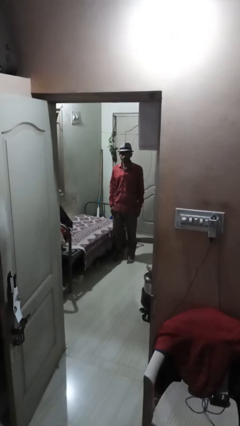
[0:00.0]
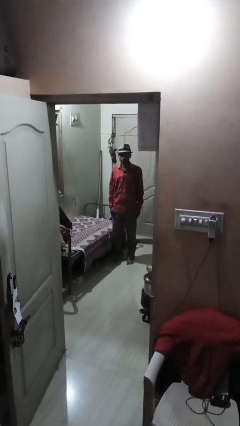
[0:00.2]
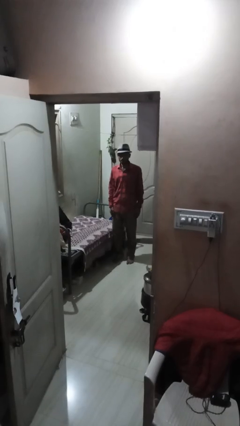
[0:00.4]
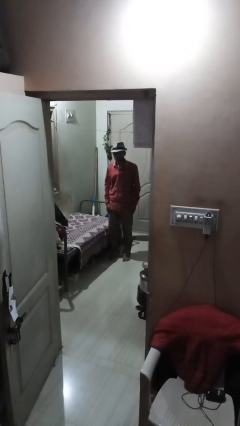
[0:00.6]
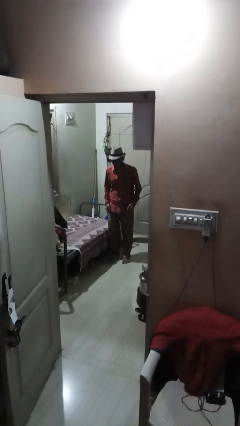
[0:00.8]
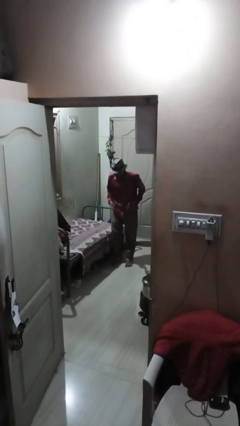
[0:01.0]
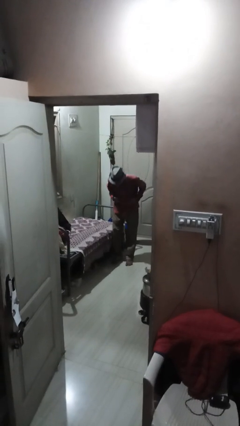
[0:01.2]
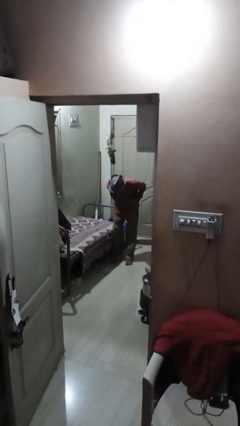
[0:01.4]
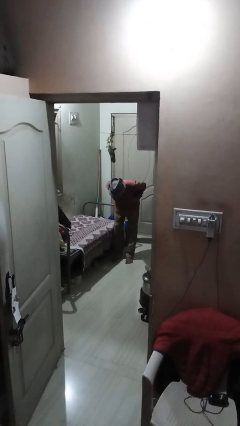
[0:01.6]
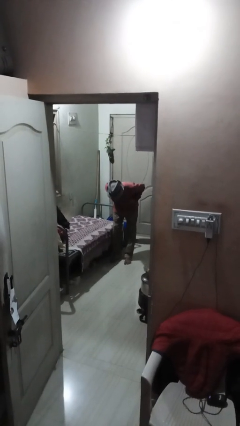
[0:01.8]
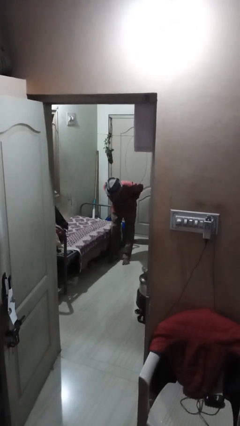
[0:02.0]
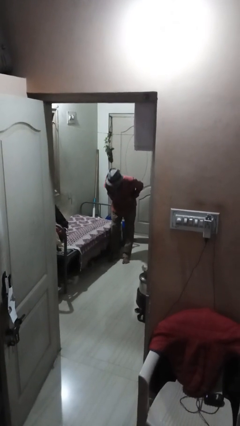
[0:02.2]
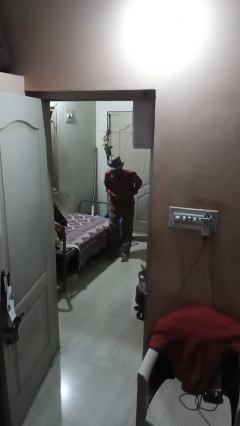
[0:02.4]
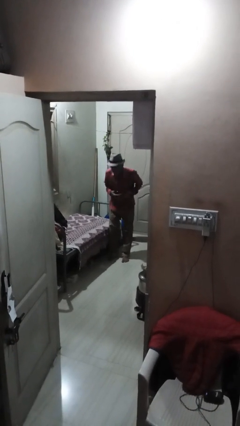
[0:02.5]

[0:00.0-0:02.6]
person bows

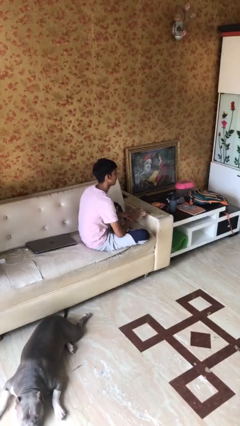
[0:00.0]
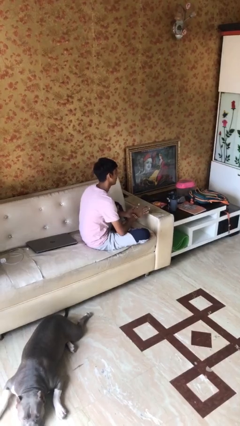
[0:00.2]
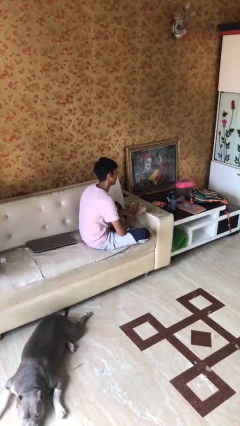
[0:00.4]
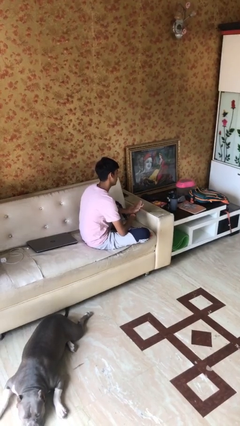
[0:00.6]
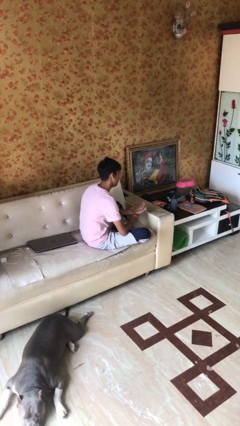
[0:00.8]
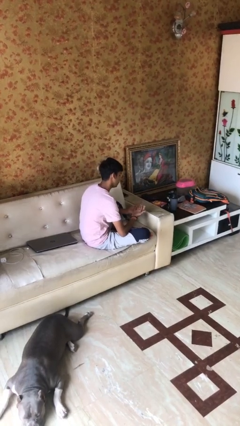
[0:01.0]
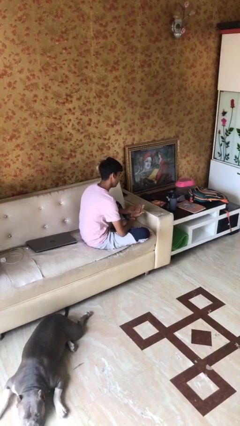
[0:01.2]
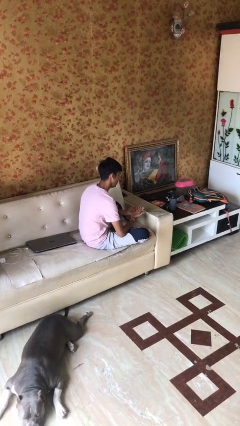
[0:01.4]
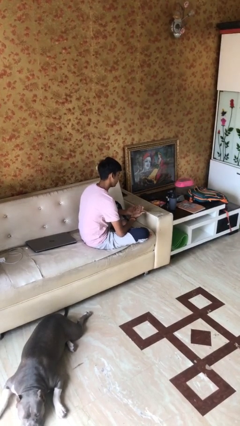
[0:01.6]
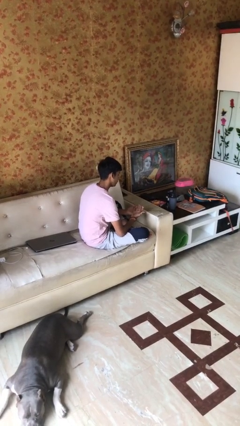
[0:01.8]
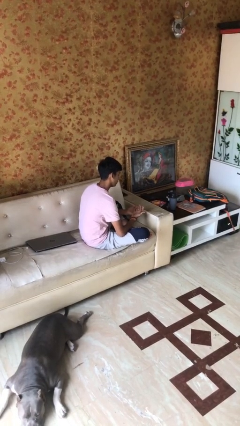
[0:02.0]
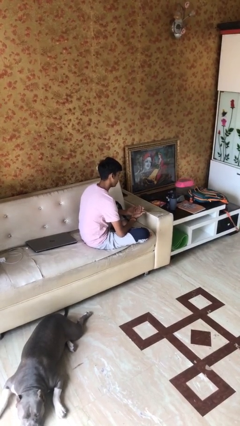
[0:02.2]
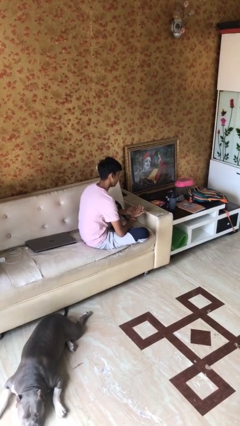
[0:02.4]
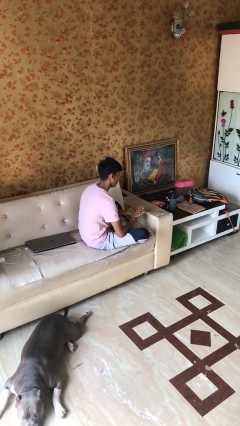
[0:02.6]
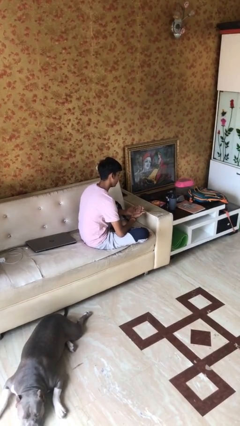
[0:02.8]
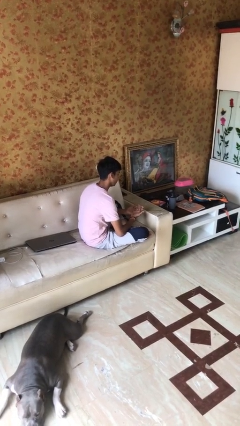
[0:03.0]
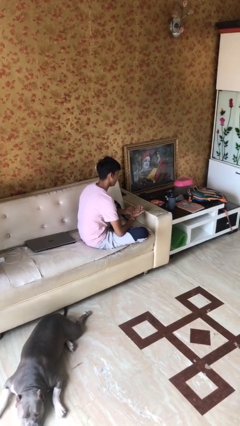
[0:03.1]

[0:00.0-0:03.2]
person looks at hands in lap

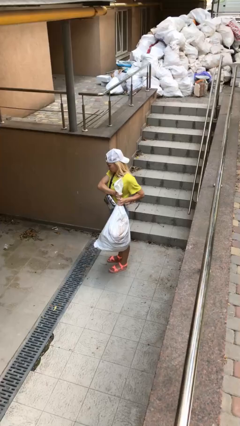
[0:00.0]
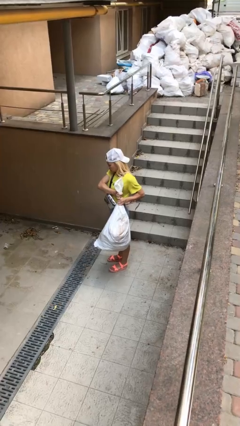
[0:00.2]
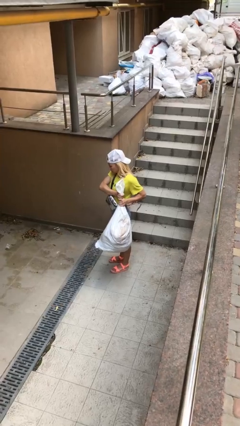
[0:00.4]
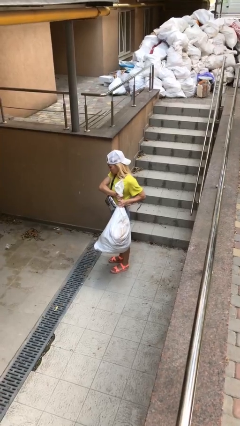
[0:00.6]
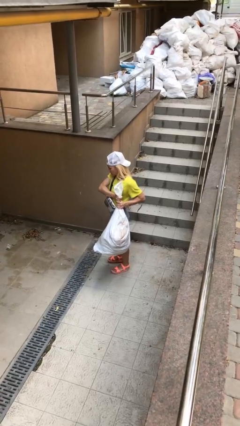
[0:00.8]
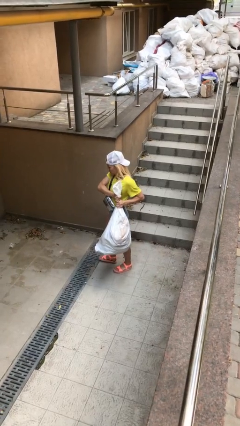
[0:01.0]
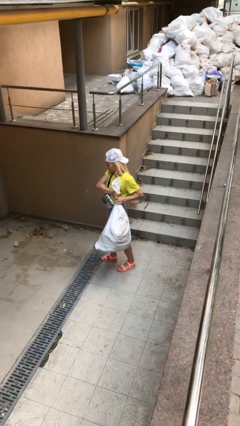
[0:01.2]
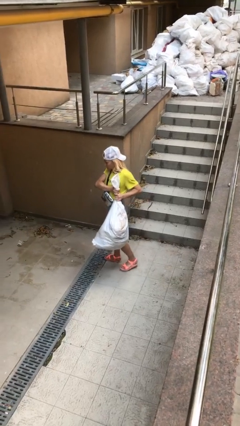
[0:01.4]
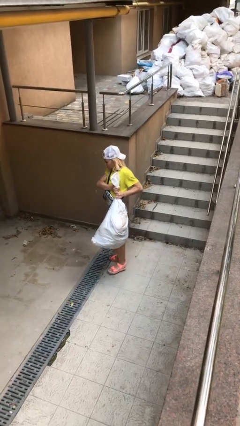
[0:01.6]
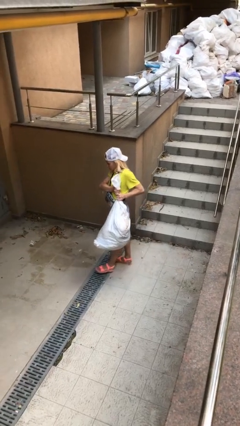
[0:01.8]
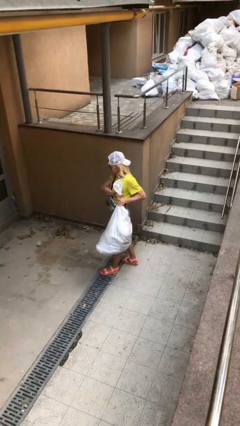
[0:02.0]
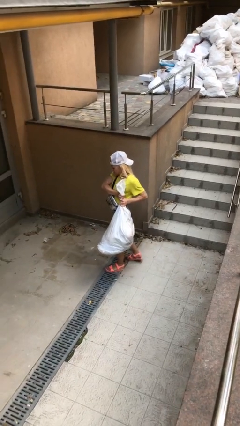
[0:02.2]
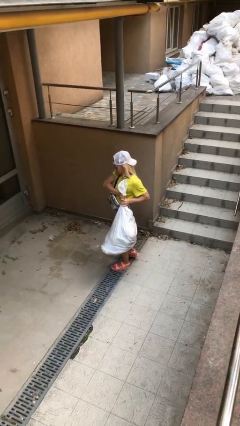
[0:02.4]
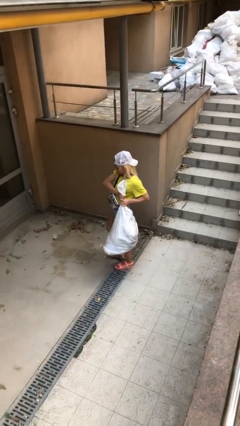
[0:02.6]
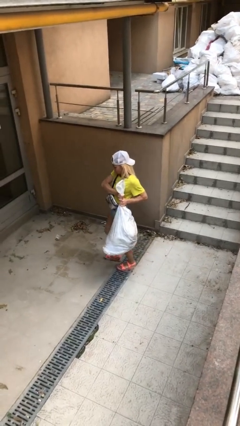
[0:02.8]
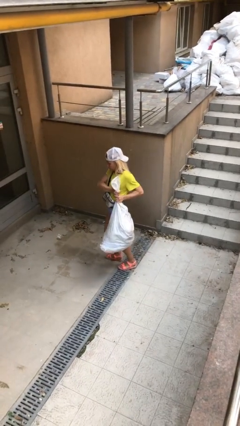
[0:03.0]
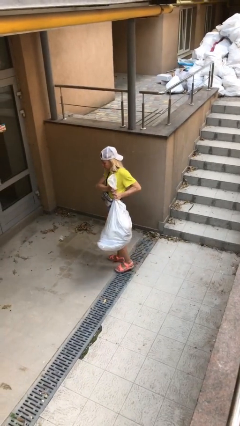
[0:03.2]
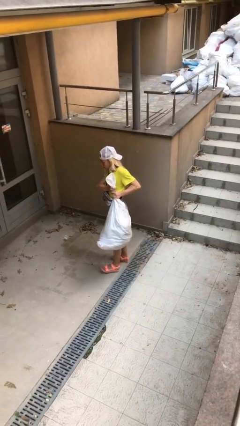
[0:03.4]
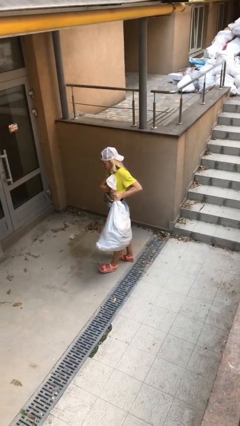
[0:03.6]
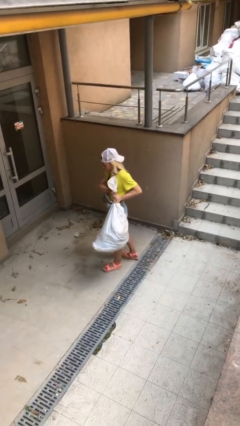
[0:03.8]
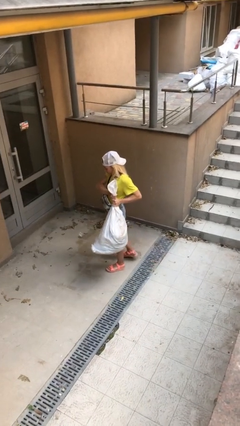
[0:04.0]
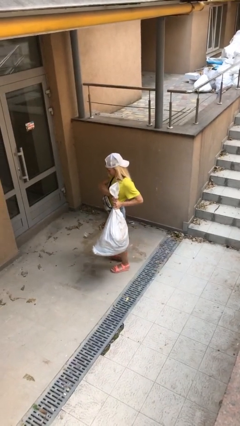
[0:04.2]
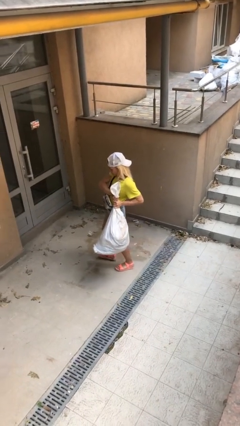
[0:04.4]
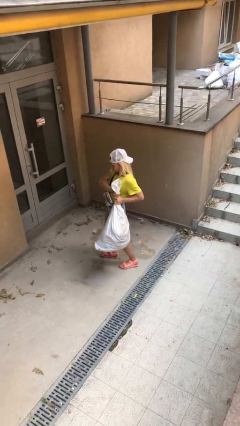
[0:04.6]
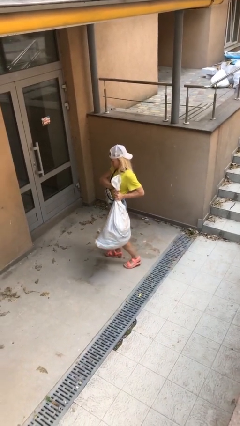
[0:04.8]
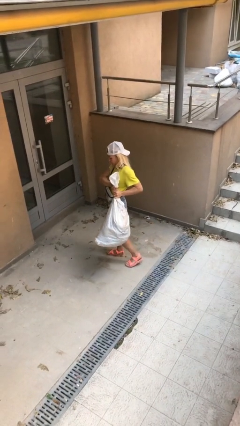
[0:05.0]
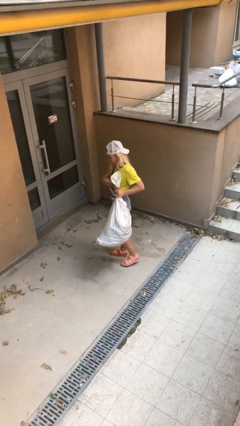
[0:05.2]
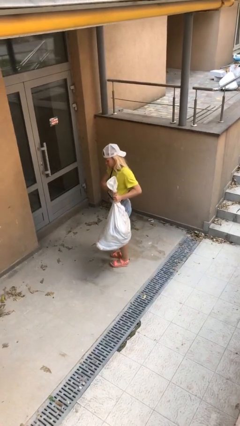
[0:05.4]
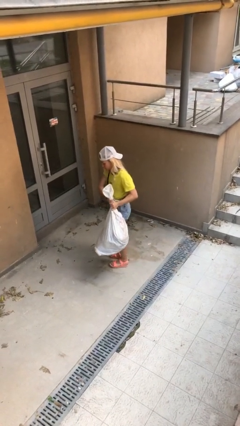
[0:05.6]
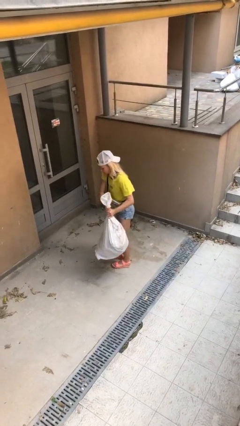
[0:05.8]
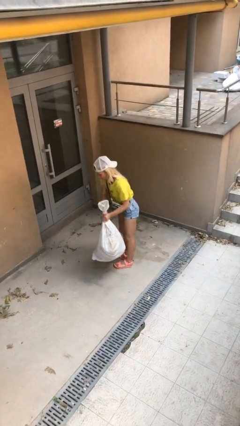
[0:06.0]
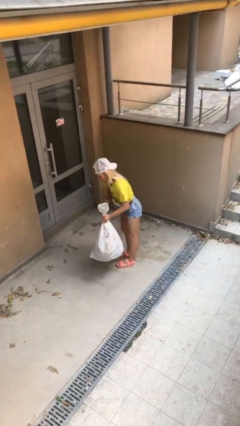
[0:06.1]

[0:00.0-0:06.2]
person carries heavy object

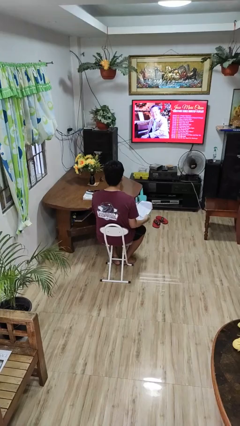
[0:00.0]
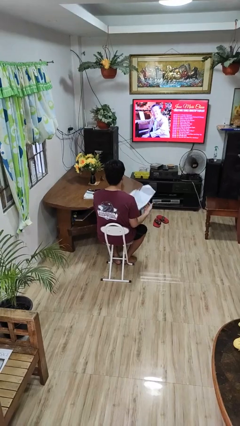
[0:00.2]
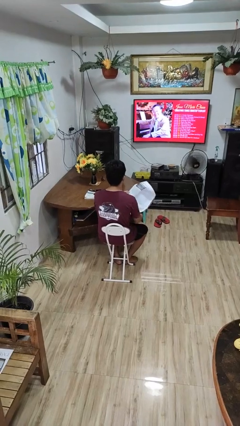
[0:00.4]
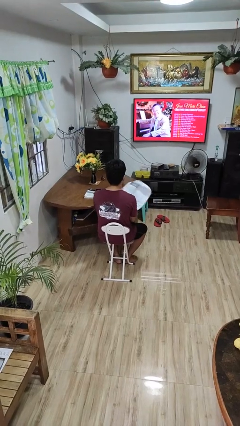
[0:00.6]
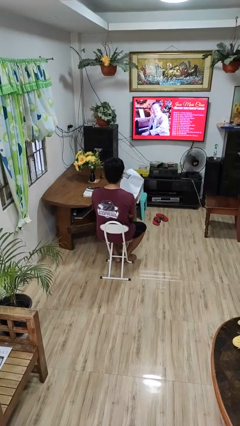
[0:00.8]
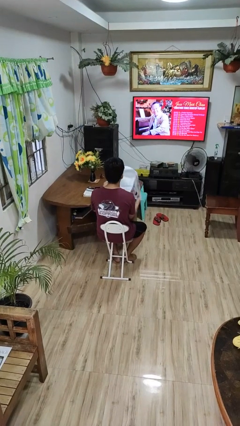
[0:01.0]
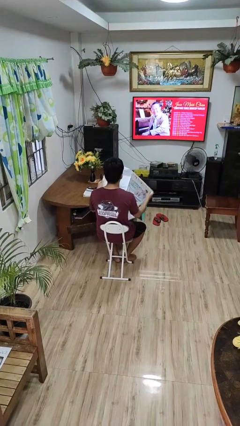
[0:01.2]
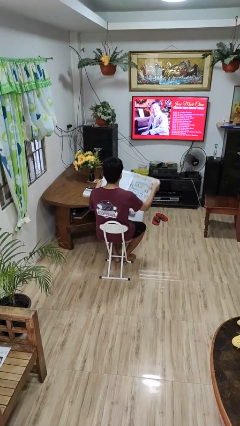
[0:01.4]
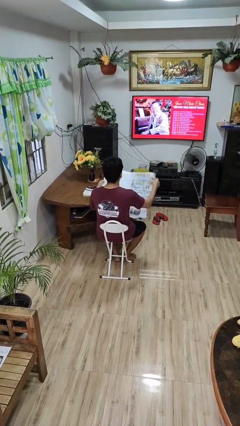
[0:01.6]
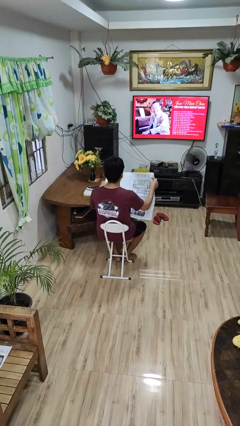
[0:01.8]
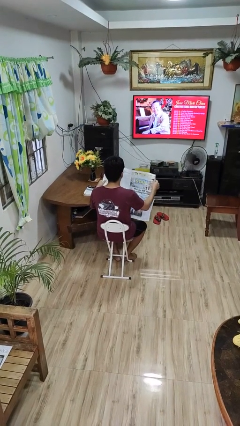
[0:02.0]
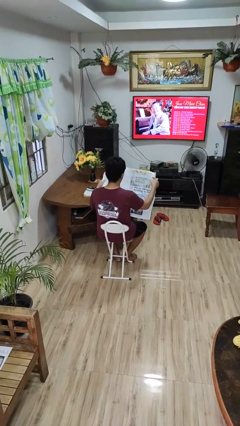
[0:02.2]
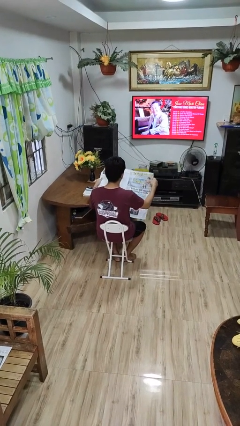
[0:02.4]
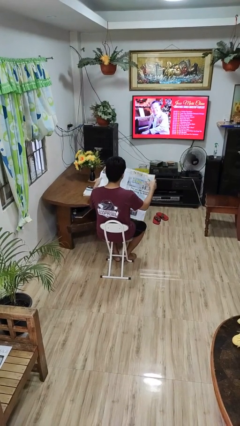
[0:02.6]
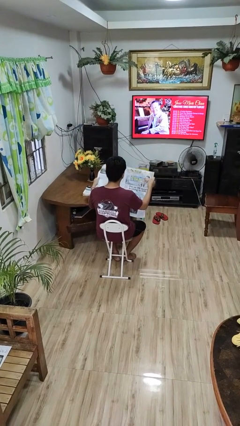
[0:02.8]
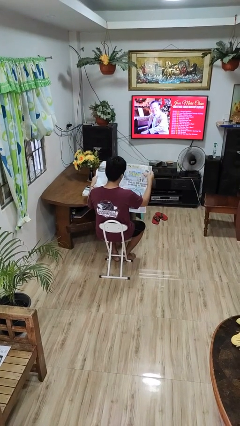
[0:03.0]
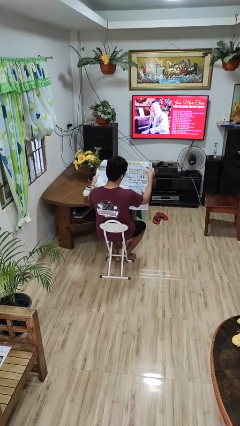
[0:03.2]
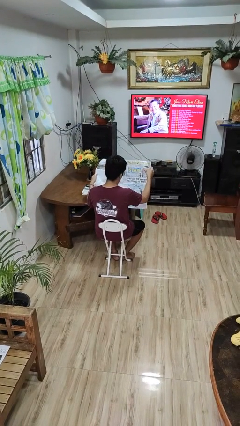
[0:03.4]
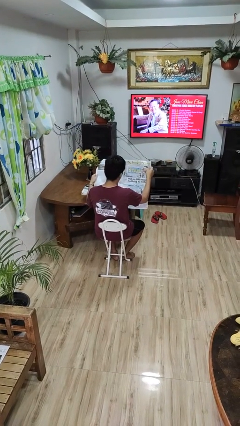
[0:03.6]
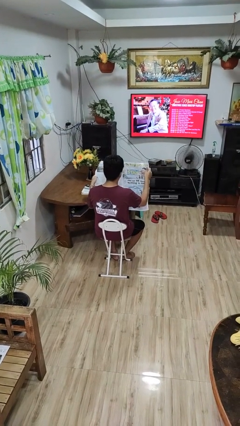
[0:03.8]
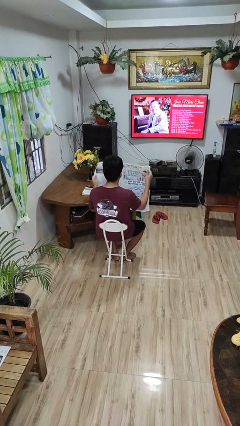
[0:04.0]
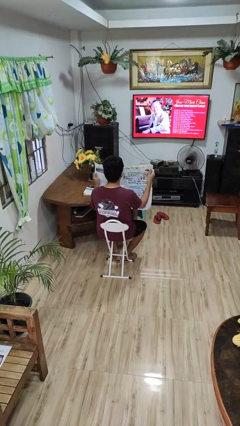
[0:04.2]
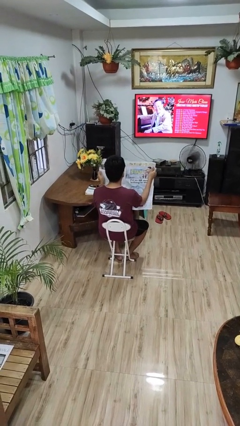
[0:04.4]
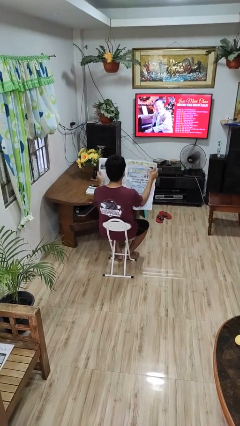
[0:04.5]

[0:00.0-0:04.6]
person reads newspaper

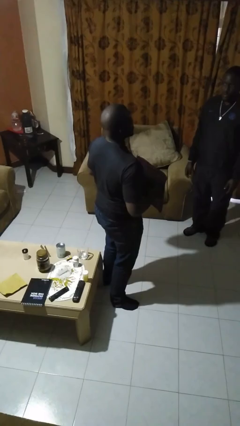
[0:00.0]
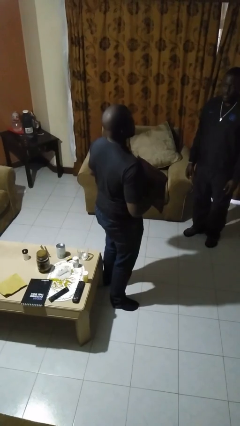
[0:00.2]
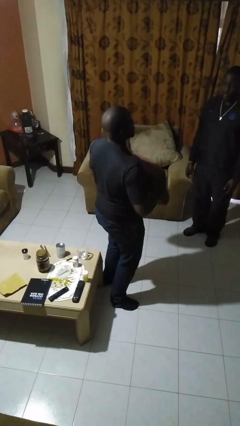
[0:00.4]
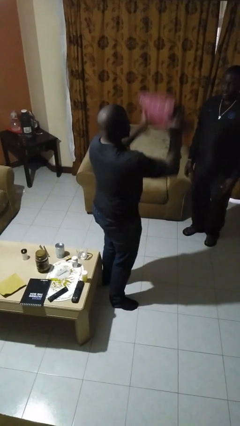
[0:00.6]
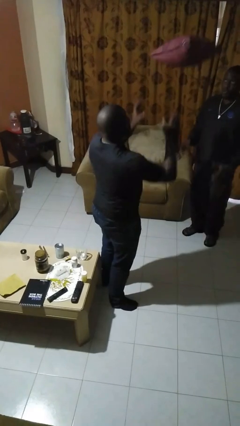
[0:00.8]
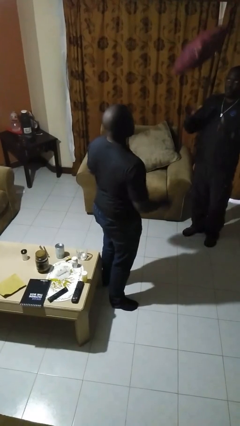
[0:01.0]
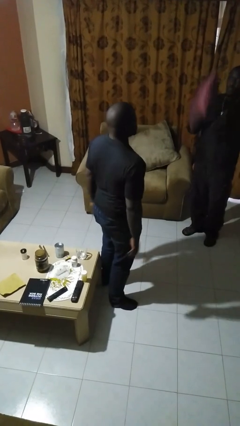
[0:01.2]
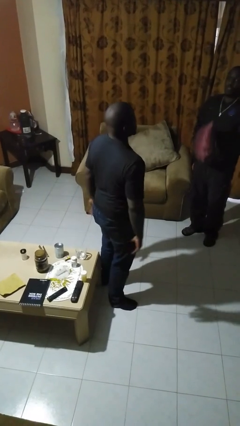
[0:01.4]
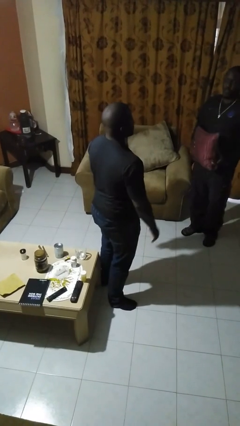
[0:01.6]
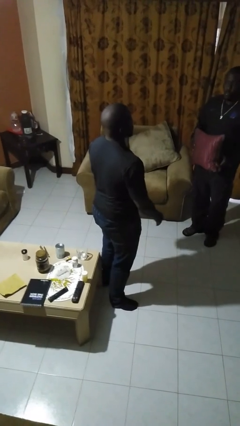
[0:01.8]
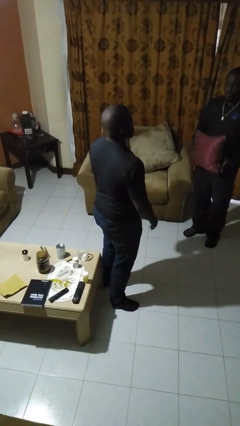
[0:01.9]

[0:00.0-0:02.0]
person throws object to person
